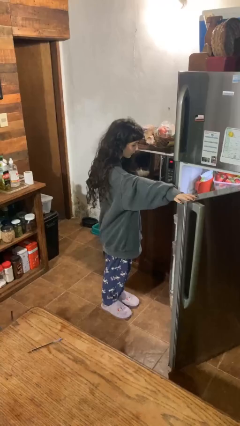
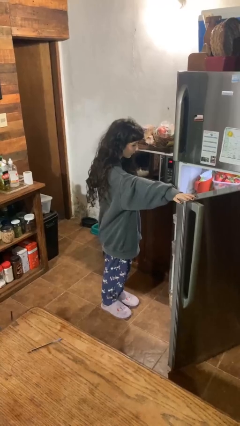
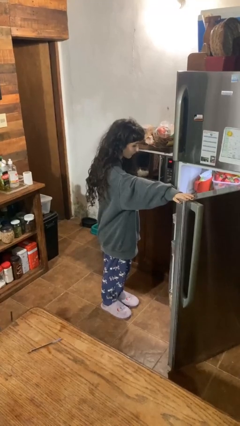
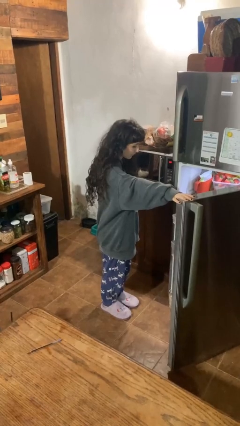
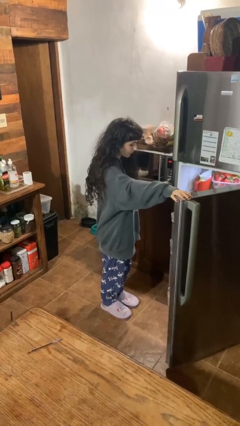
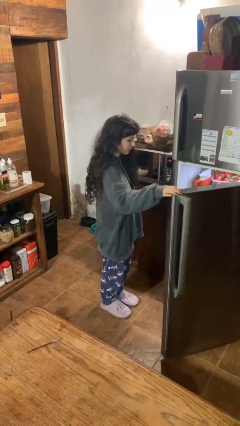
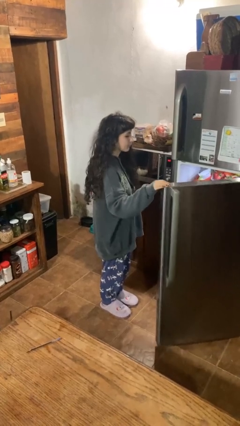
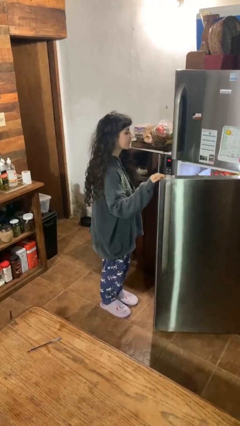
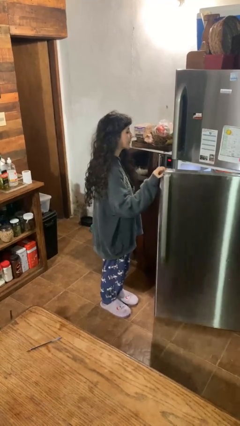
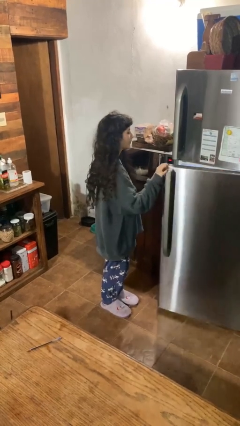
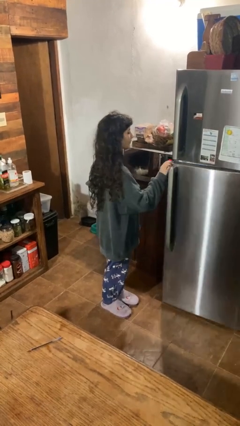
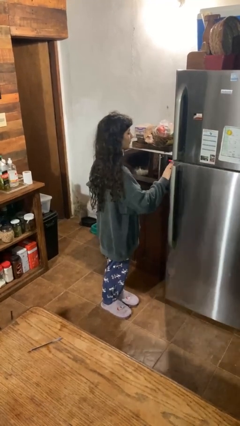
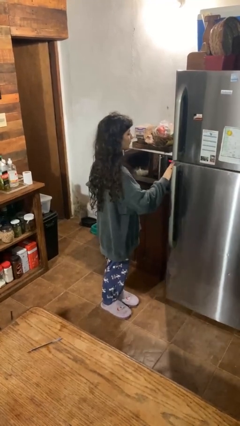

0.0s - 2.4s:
person closes refrigerator

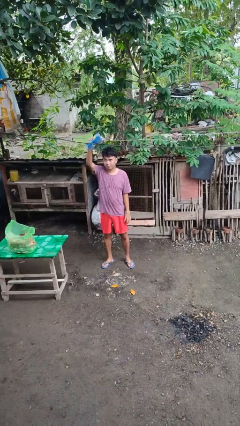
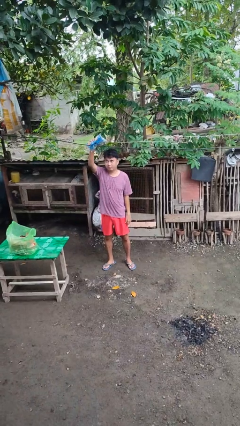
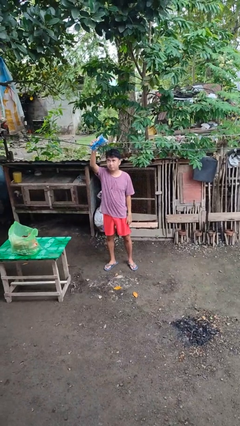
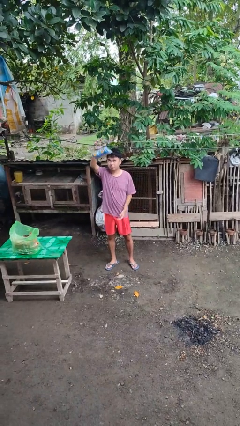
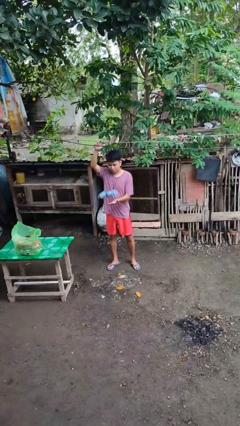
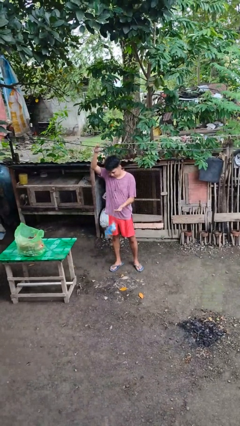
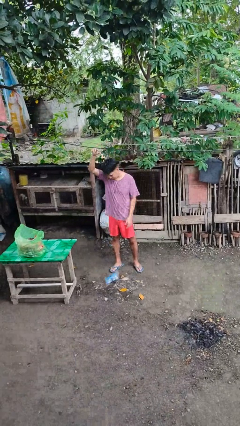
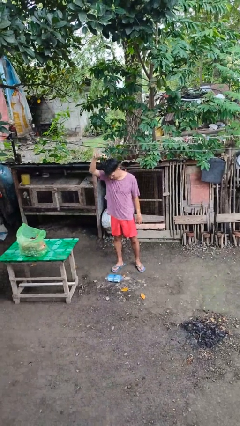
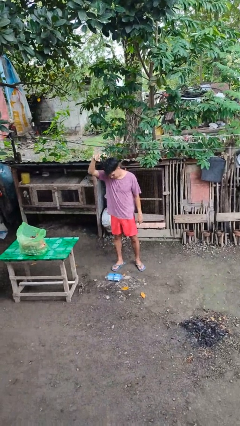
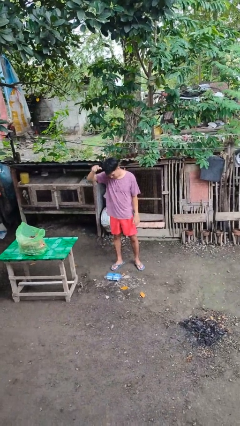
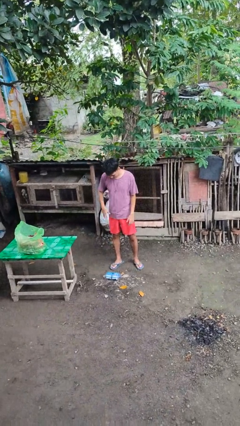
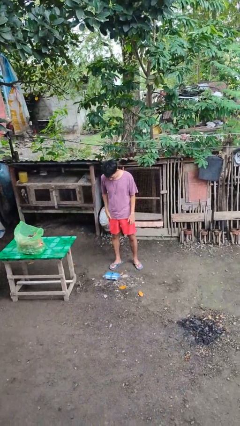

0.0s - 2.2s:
person drops object

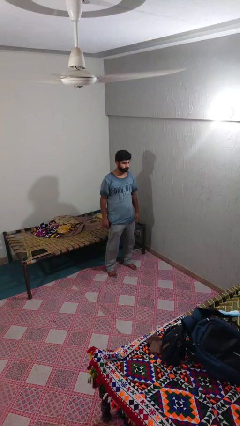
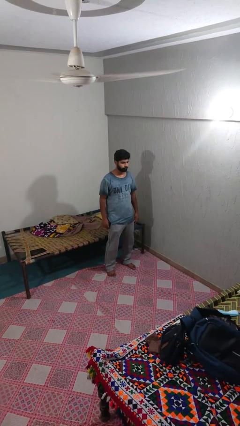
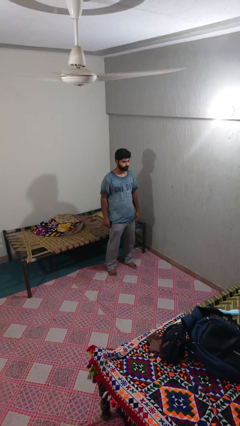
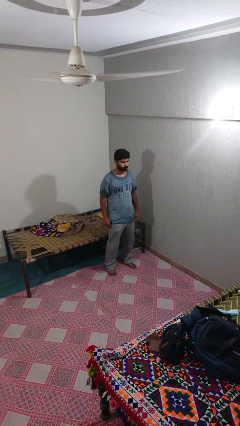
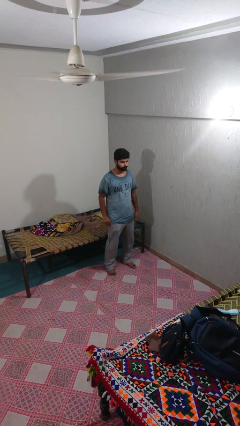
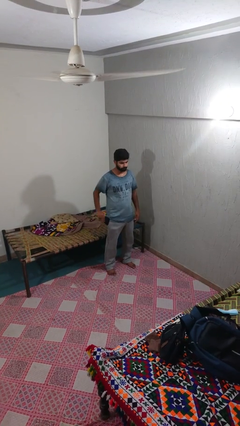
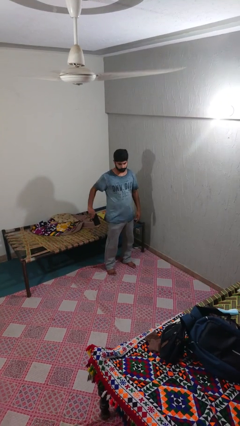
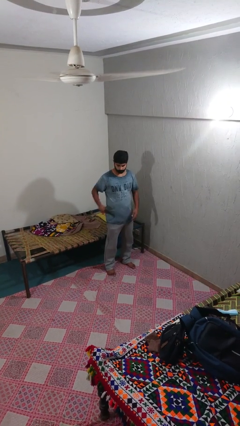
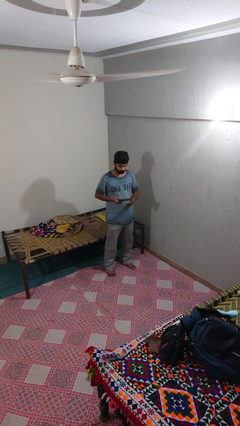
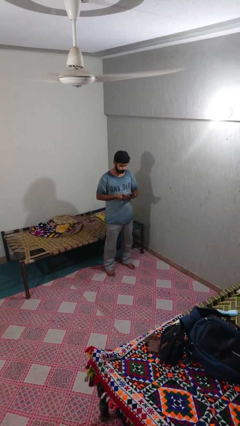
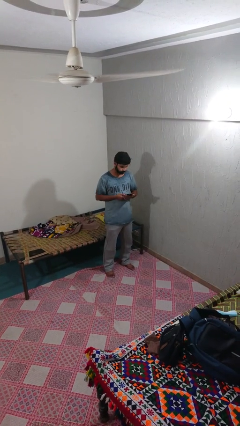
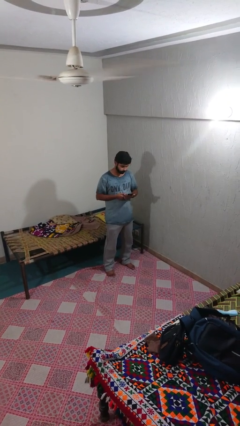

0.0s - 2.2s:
person takes phone from pocket

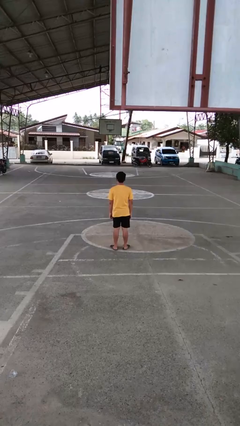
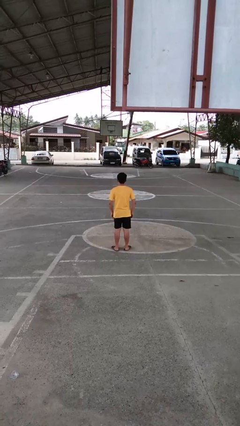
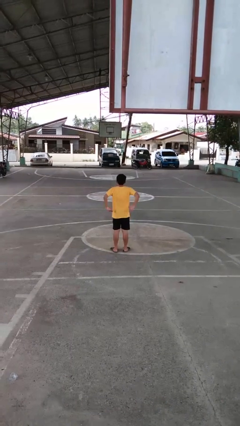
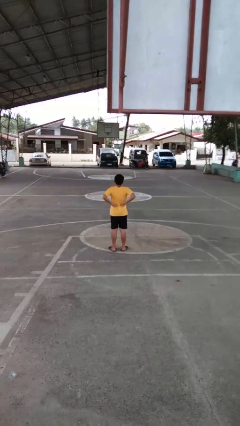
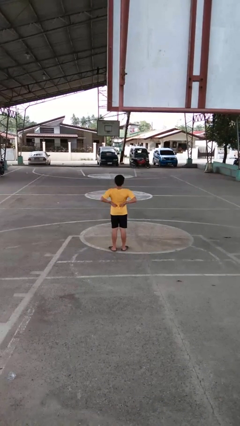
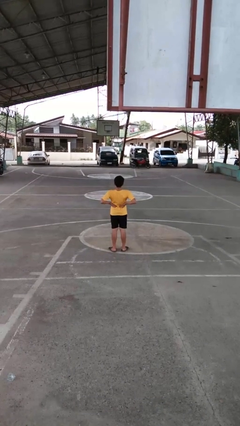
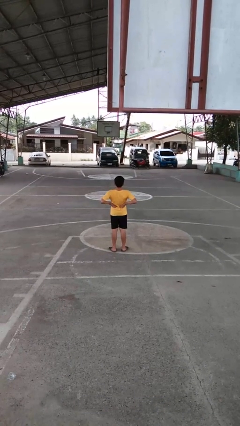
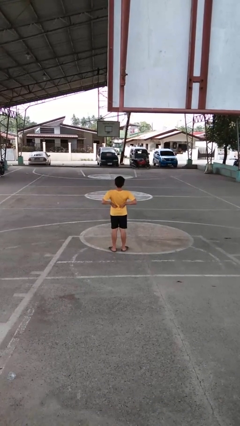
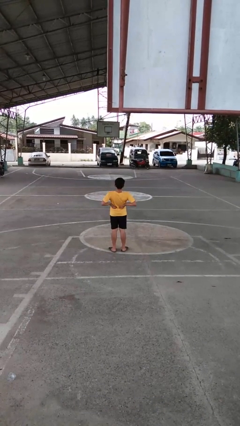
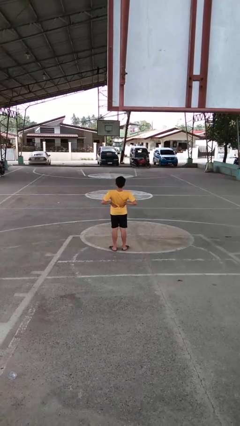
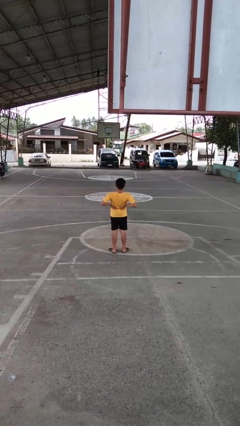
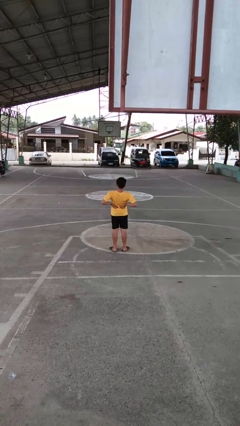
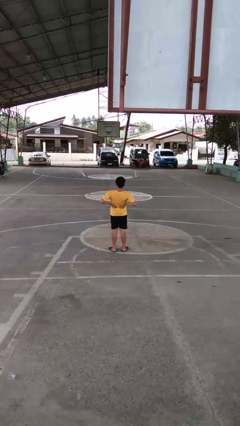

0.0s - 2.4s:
person stretches back

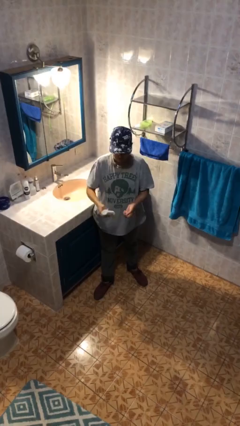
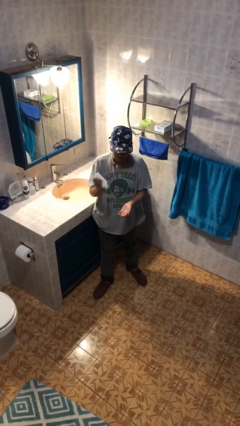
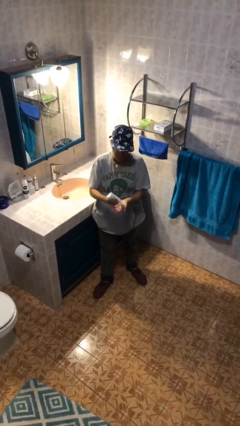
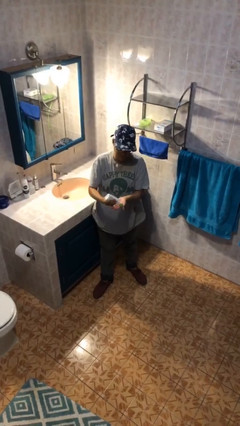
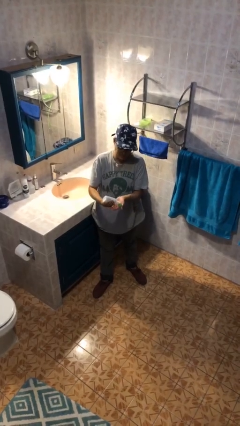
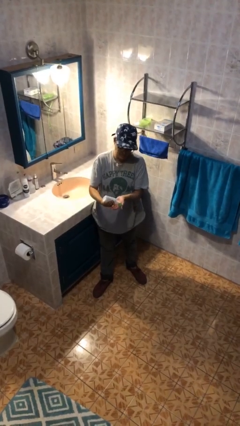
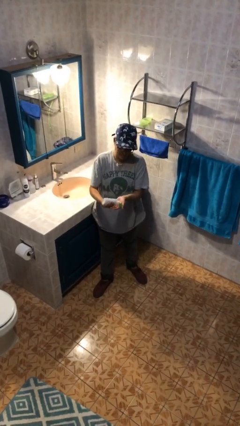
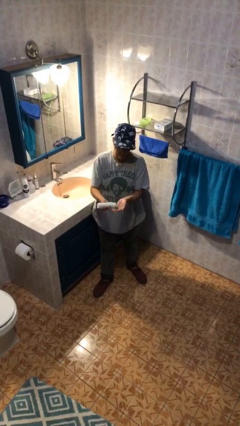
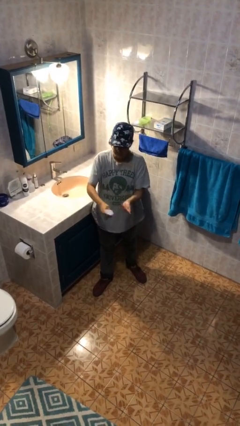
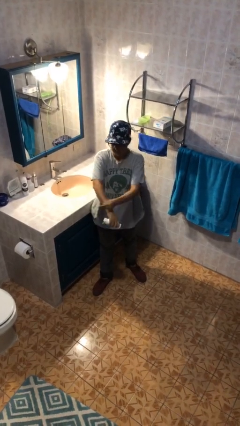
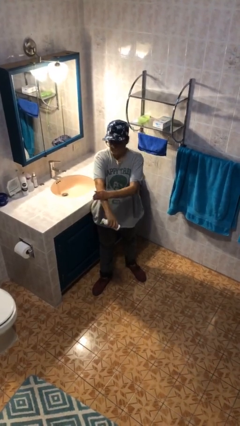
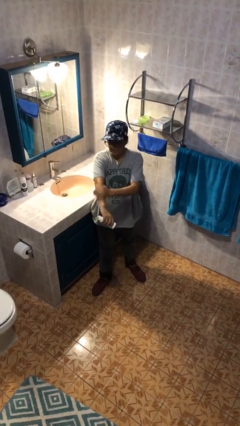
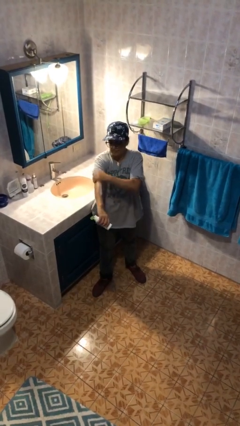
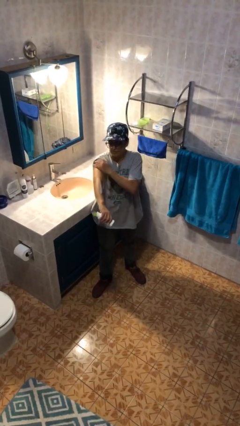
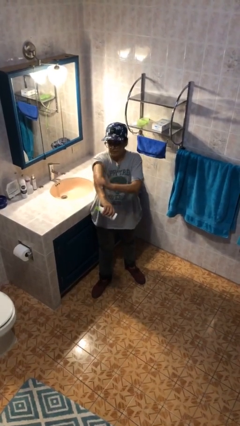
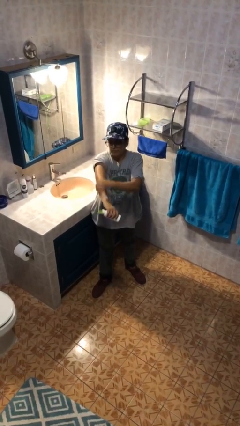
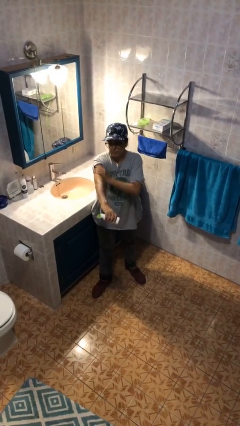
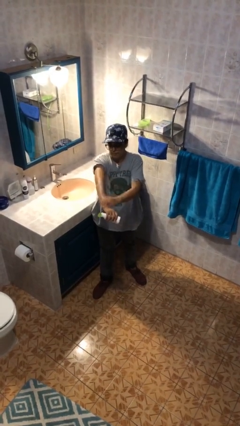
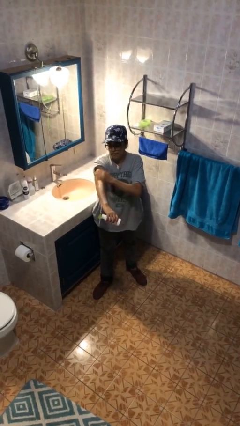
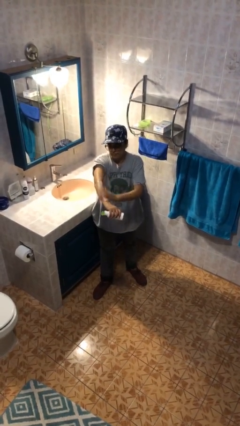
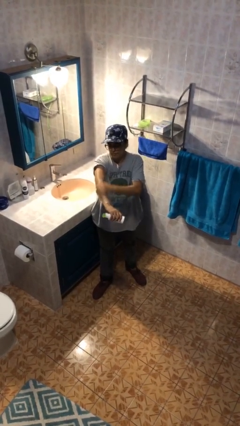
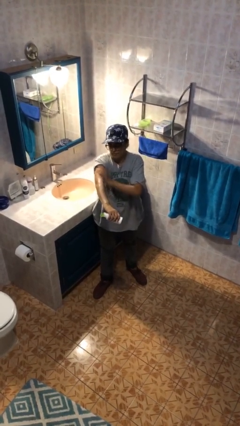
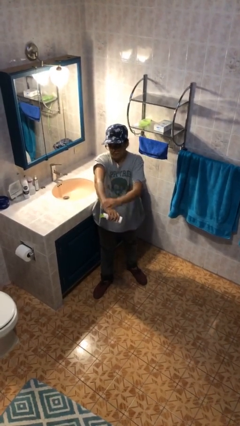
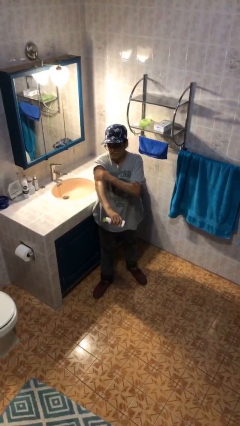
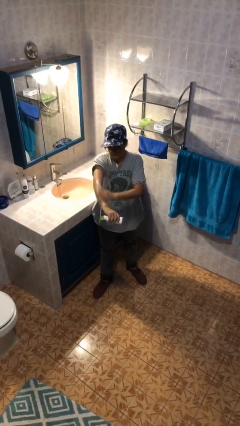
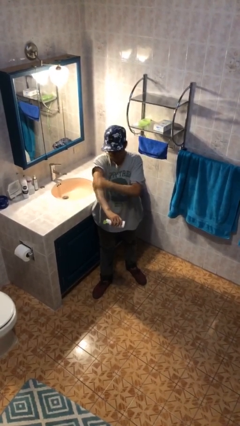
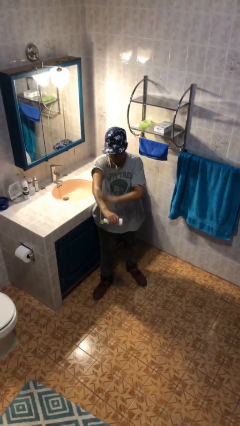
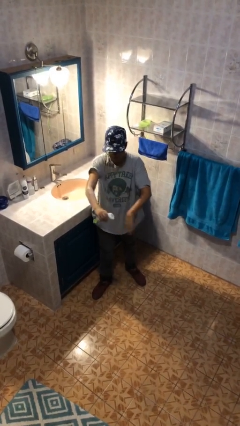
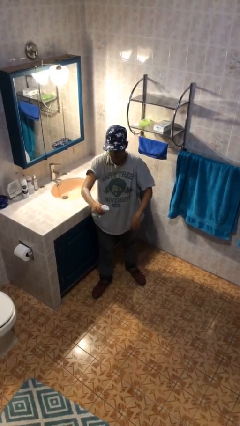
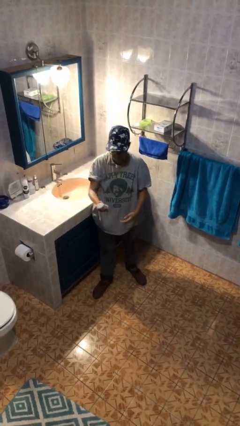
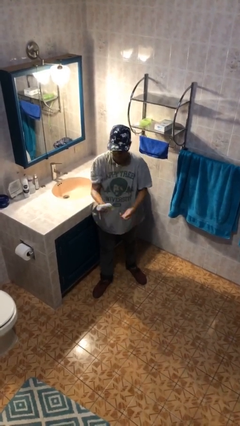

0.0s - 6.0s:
person applies sunscreen

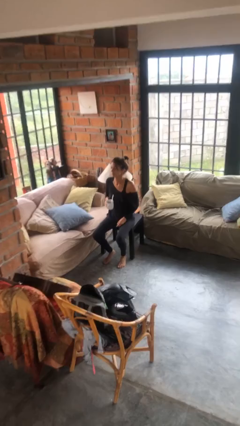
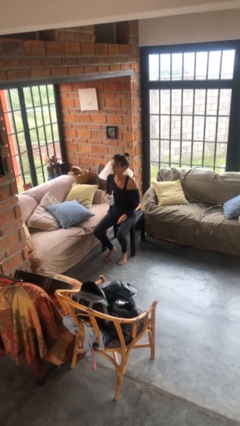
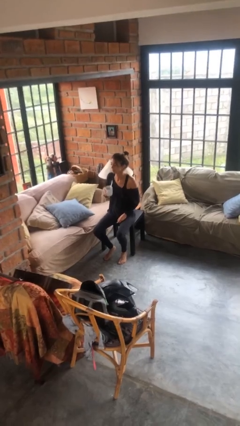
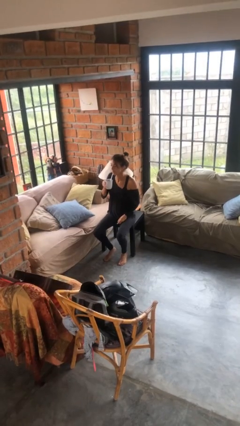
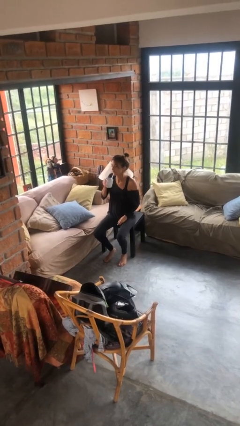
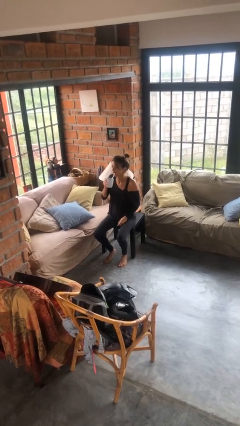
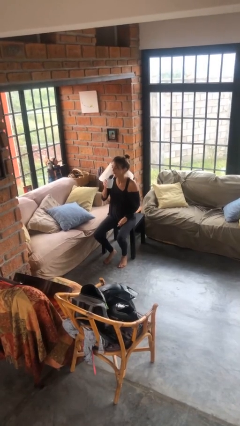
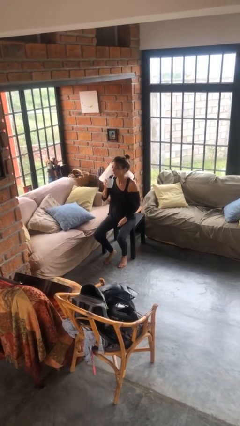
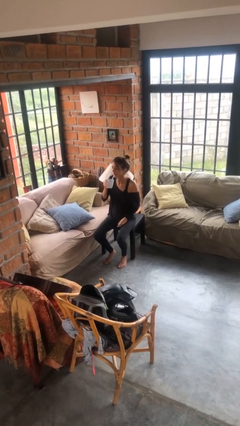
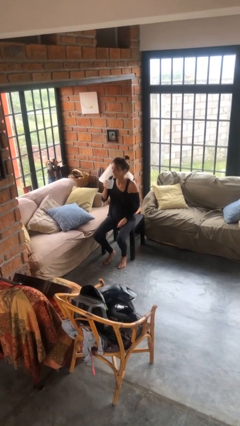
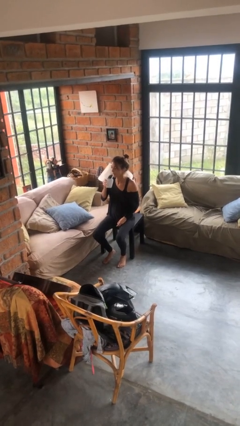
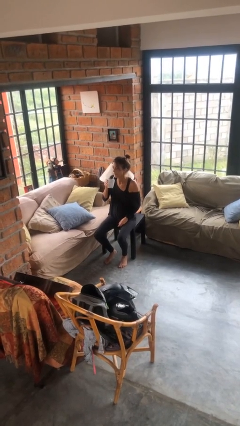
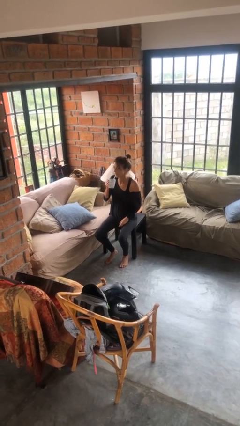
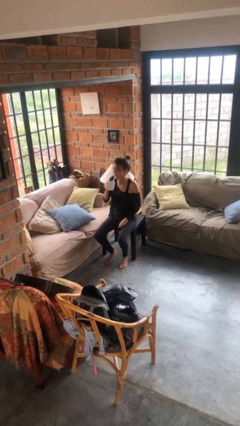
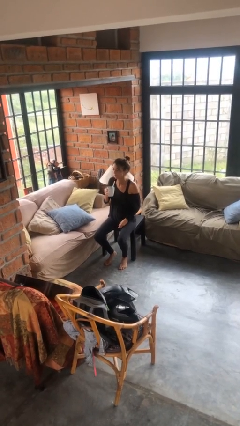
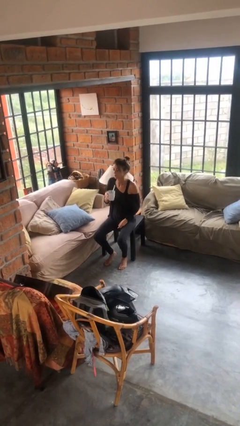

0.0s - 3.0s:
person drinks from straw
